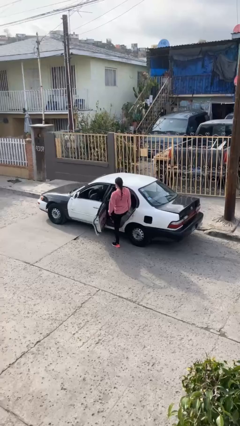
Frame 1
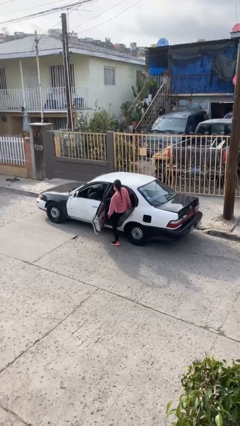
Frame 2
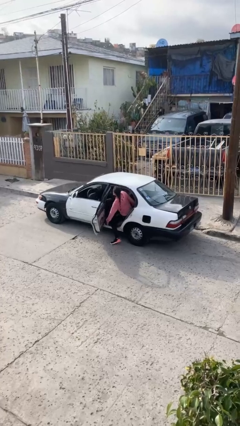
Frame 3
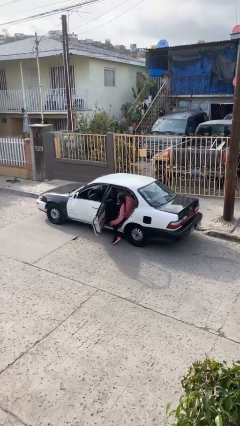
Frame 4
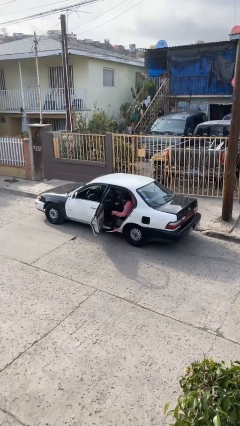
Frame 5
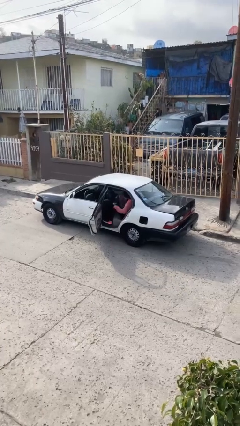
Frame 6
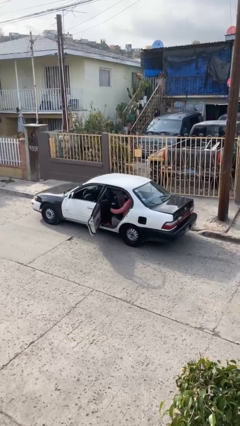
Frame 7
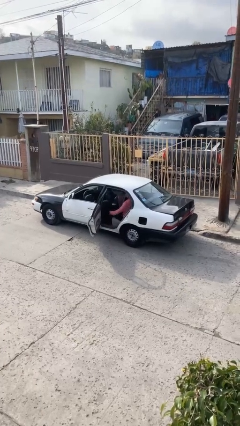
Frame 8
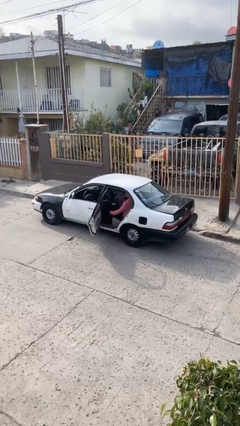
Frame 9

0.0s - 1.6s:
person enters car

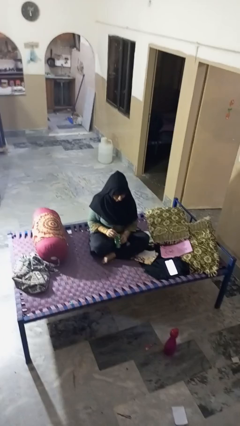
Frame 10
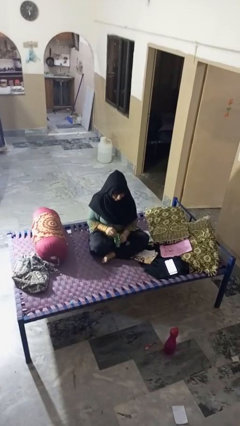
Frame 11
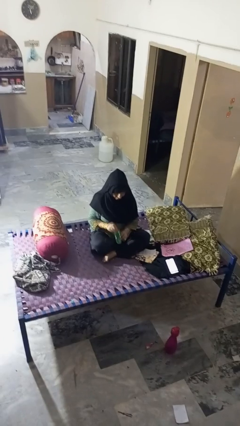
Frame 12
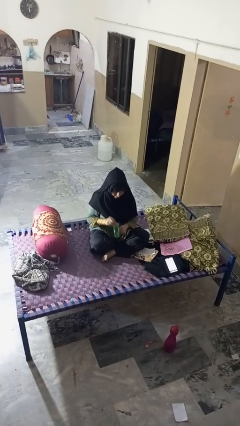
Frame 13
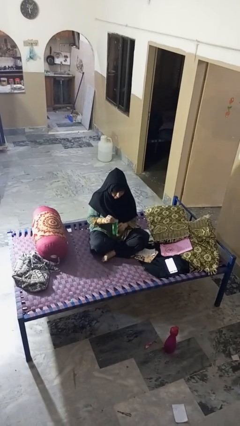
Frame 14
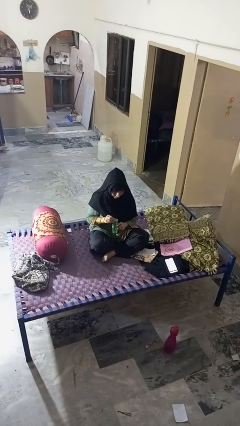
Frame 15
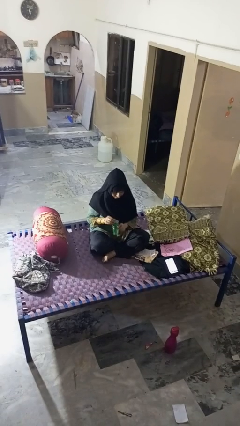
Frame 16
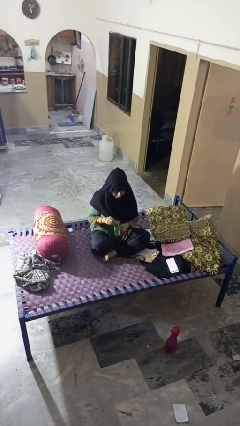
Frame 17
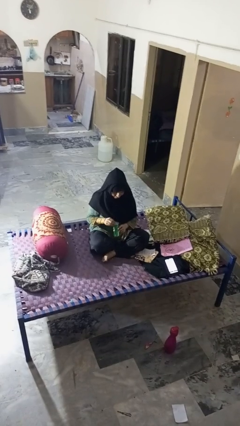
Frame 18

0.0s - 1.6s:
person opens can with can opener

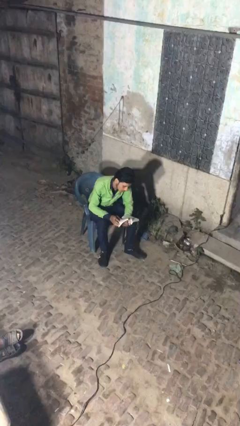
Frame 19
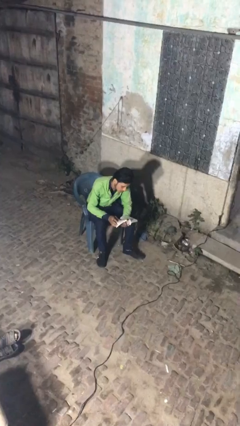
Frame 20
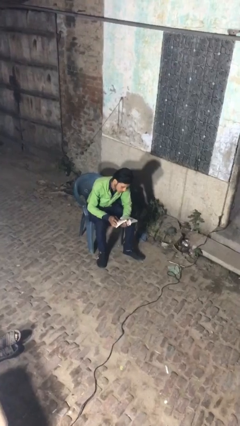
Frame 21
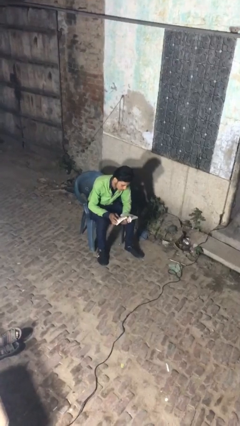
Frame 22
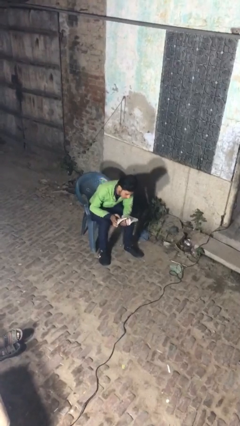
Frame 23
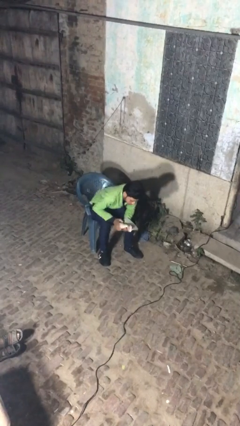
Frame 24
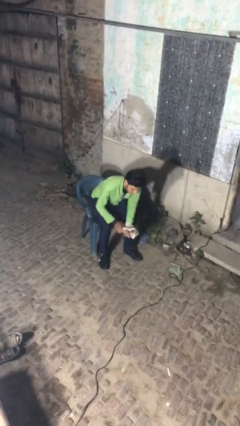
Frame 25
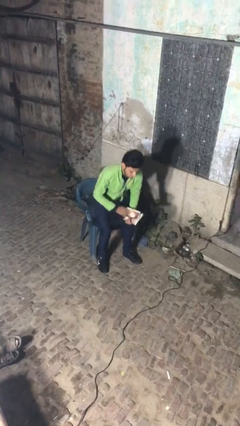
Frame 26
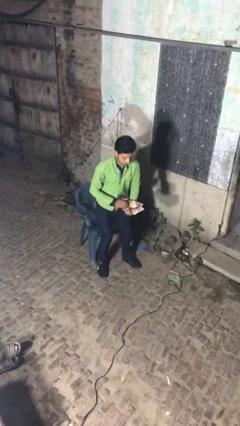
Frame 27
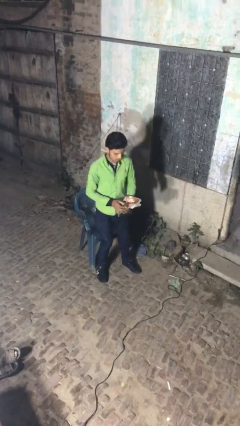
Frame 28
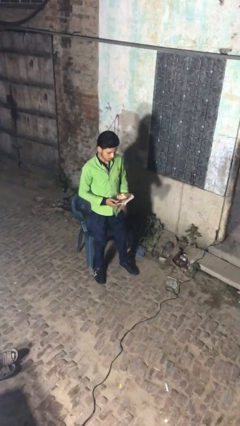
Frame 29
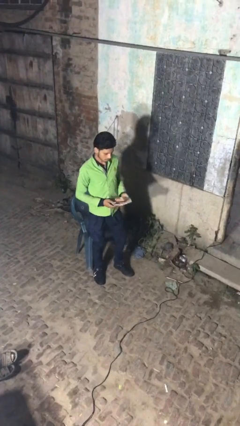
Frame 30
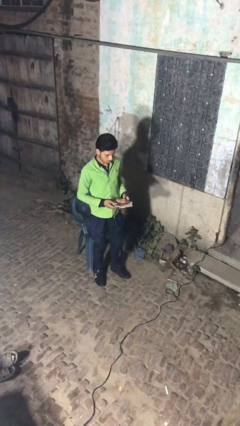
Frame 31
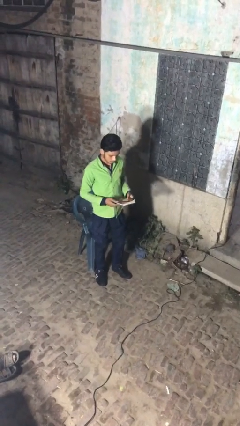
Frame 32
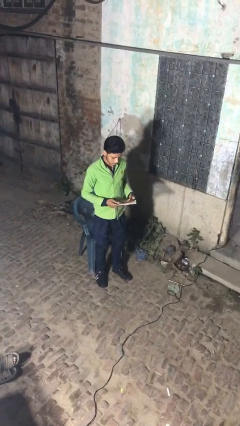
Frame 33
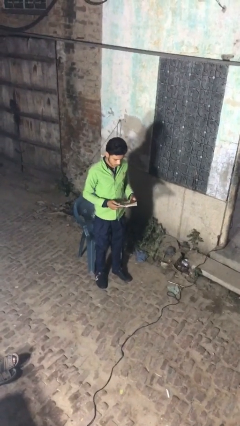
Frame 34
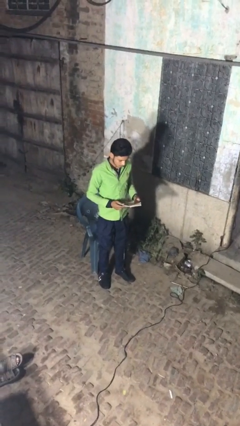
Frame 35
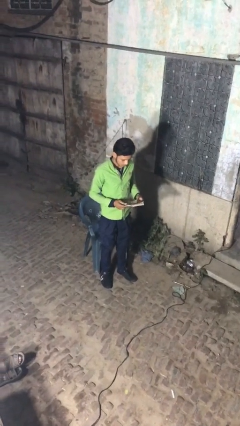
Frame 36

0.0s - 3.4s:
person stands up

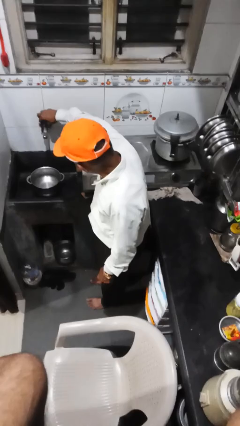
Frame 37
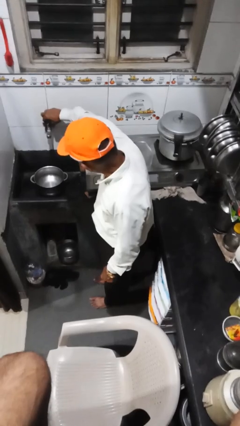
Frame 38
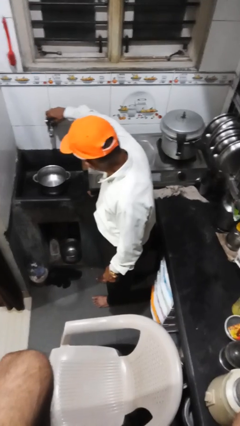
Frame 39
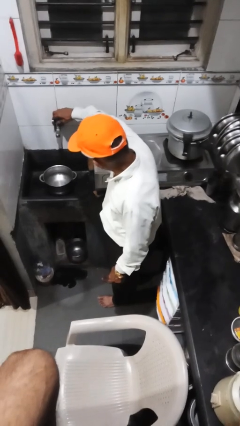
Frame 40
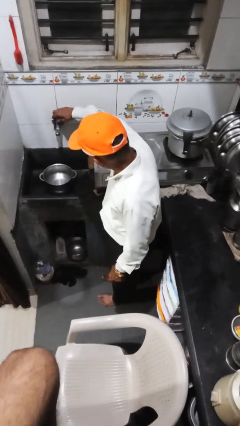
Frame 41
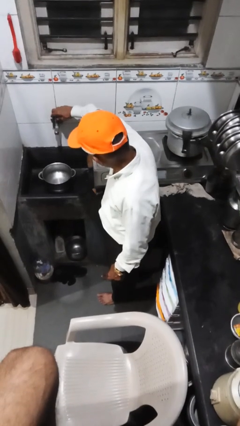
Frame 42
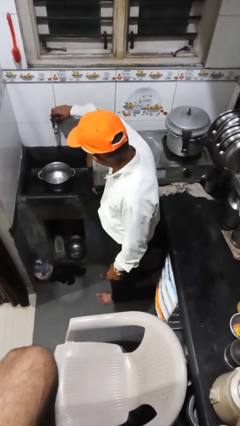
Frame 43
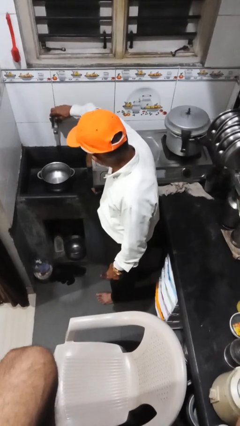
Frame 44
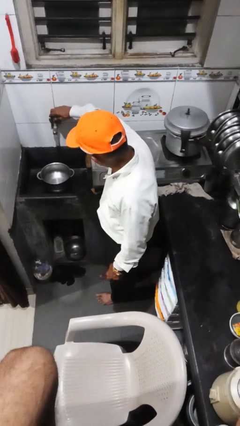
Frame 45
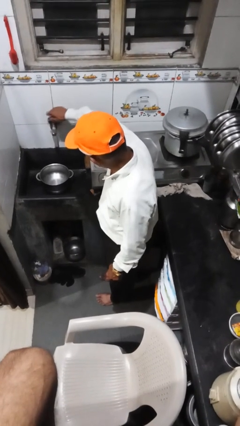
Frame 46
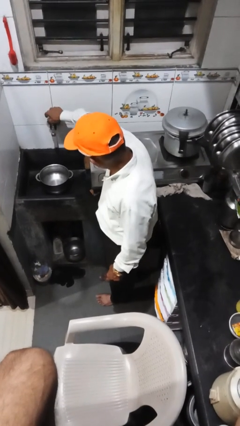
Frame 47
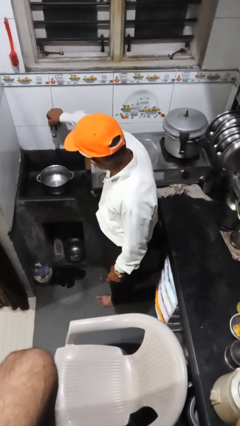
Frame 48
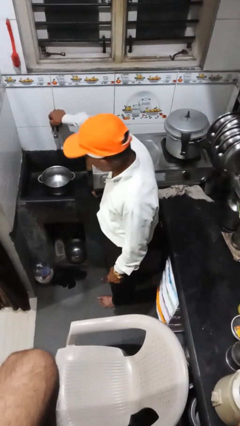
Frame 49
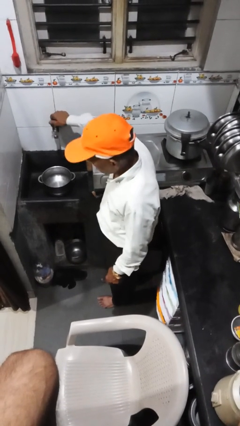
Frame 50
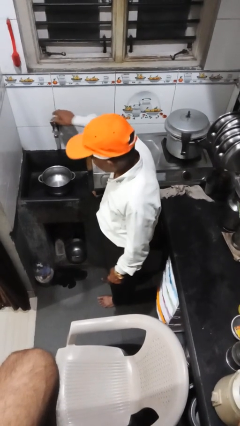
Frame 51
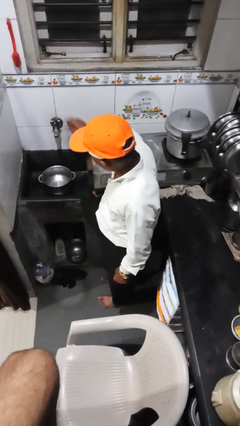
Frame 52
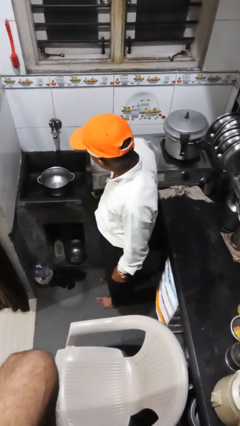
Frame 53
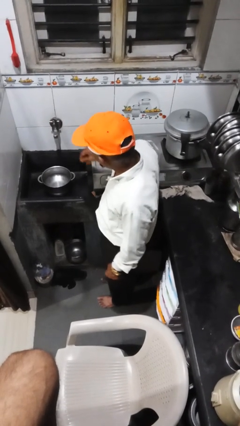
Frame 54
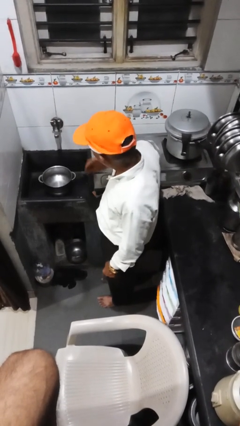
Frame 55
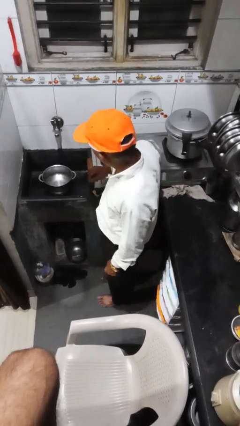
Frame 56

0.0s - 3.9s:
person turns off faucet

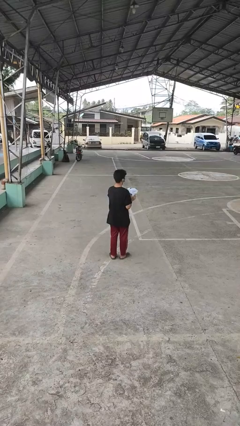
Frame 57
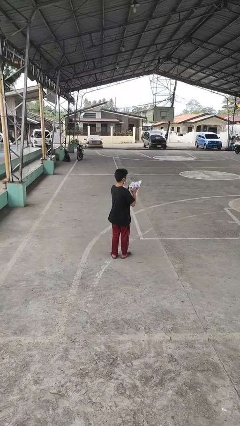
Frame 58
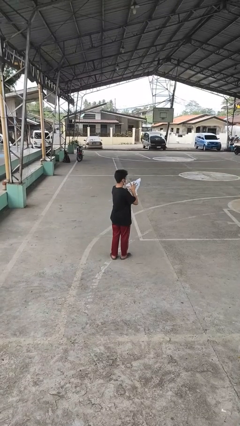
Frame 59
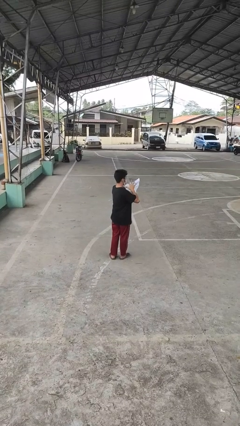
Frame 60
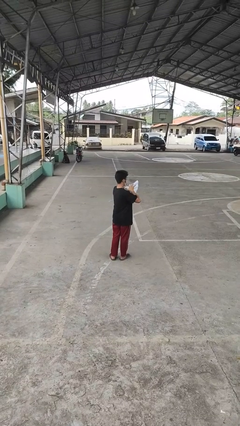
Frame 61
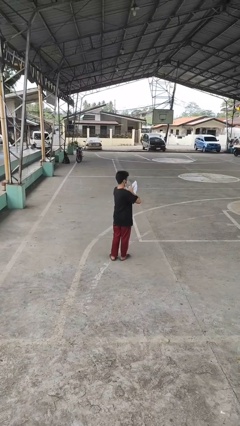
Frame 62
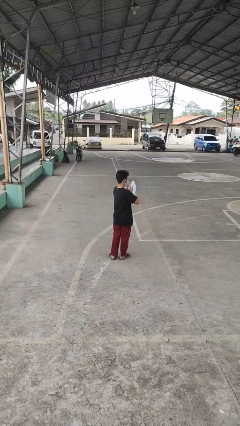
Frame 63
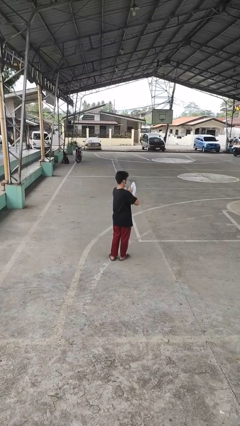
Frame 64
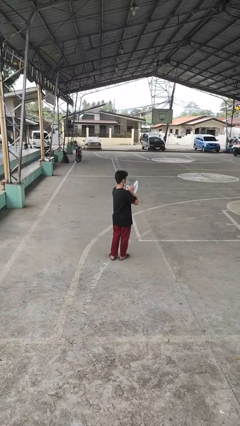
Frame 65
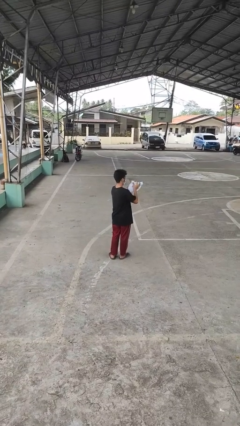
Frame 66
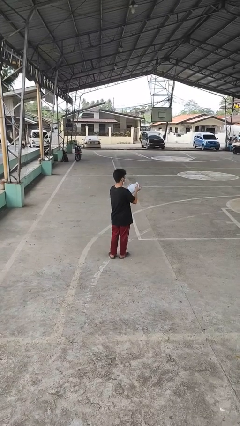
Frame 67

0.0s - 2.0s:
person squeezes object

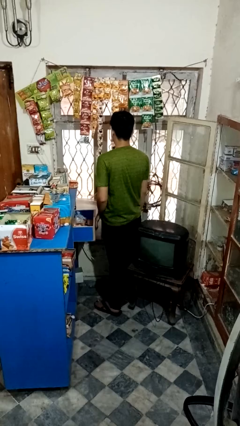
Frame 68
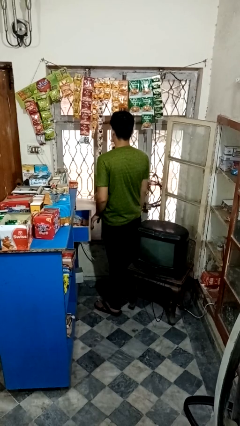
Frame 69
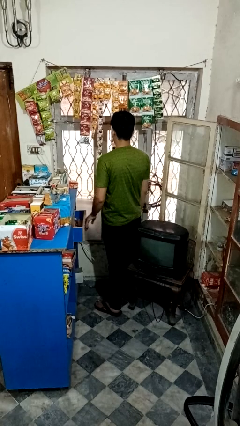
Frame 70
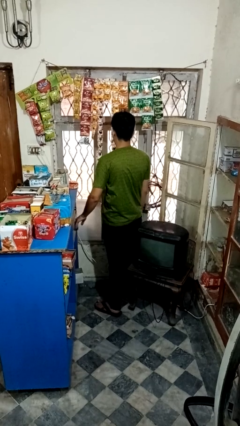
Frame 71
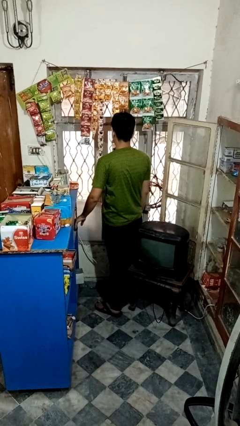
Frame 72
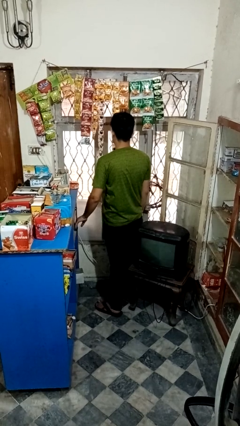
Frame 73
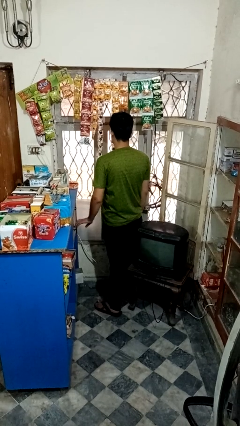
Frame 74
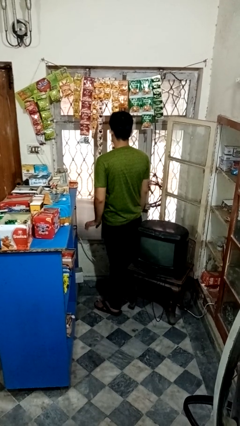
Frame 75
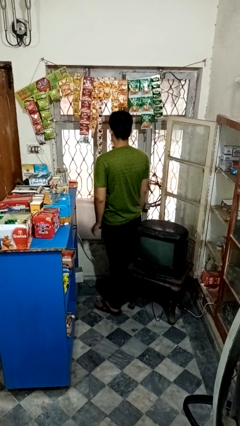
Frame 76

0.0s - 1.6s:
person closes kitchen drawer

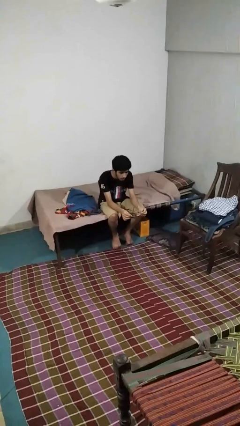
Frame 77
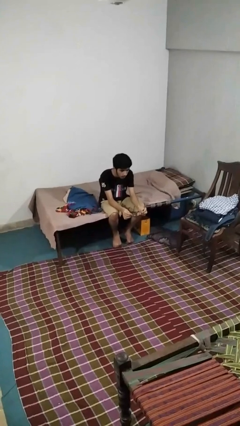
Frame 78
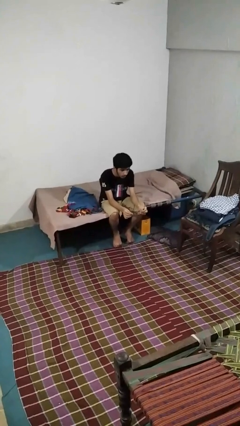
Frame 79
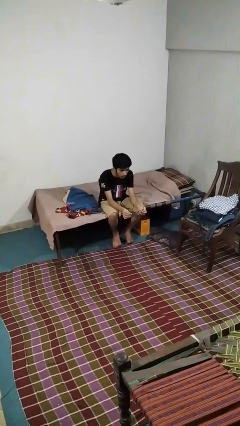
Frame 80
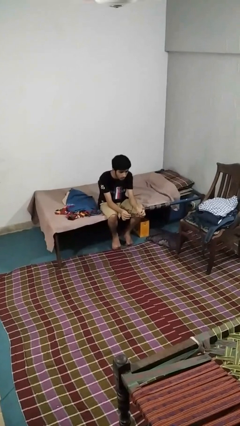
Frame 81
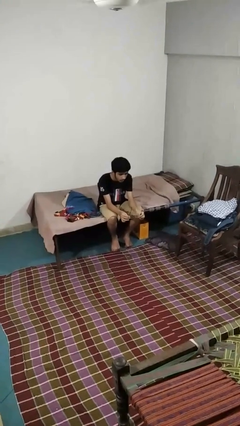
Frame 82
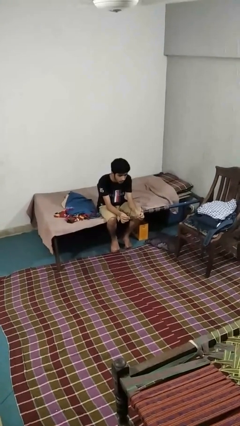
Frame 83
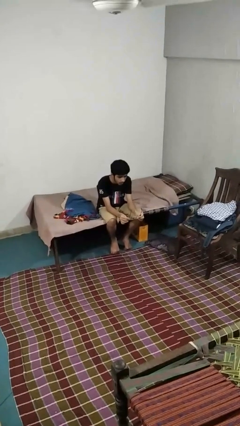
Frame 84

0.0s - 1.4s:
person takes off glasses

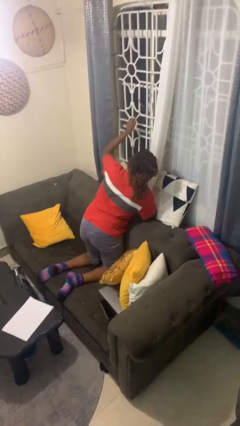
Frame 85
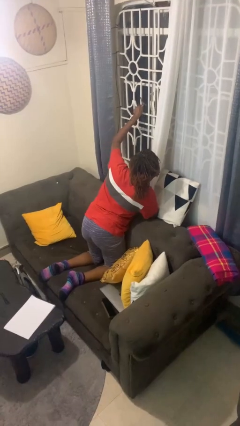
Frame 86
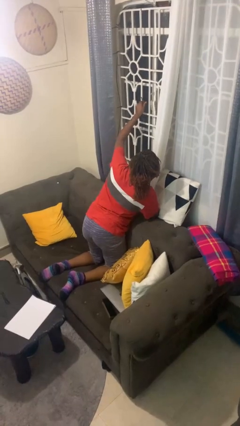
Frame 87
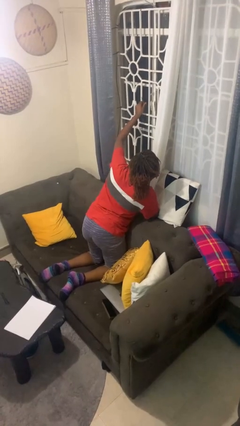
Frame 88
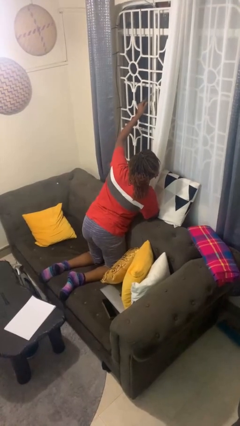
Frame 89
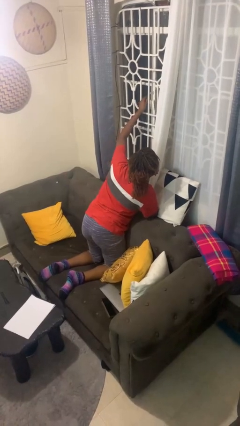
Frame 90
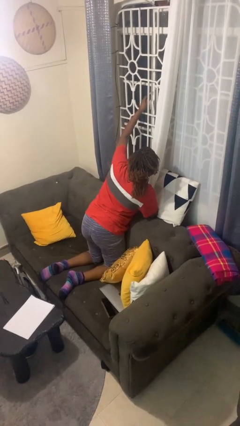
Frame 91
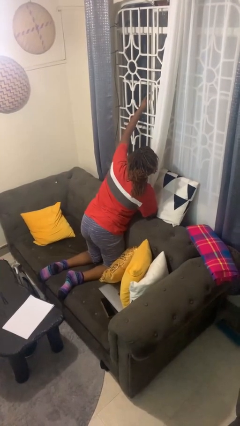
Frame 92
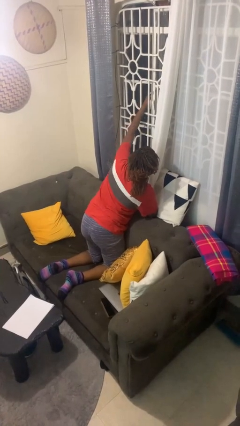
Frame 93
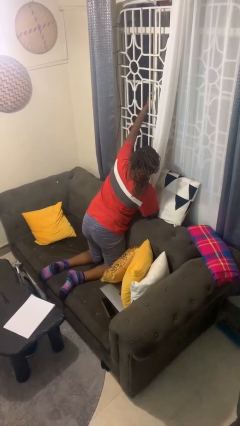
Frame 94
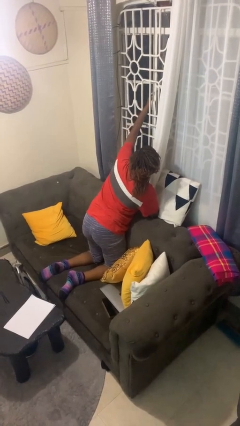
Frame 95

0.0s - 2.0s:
person opens home window
